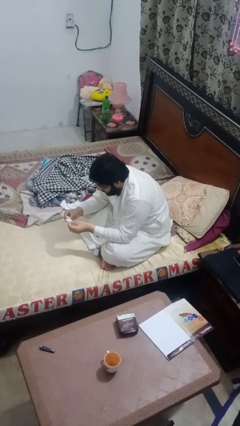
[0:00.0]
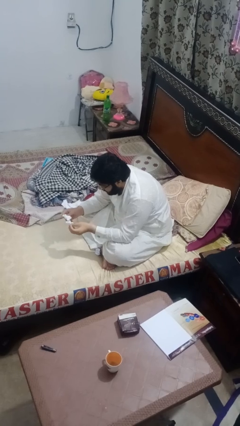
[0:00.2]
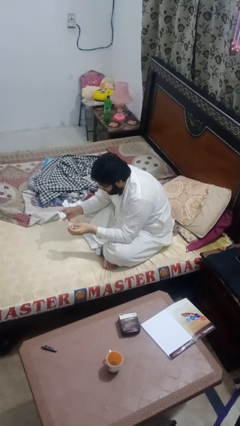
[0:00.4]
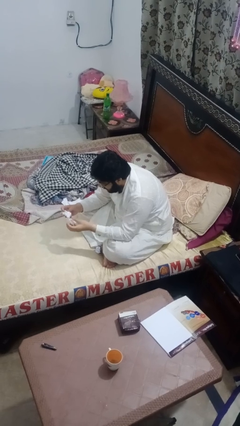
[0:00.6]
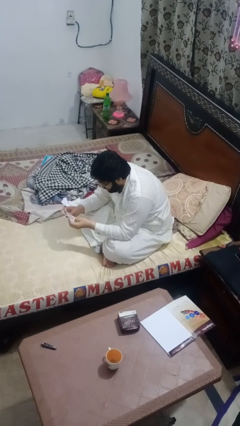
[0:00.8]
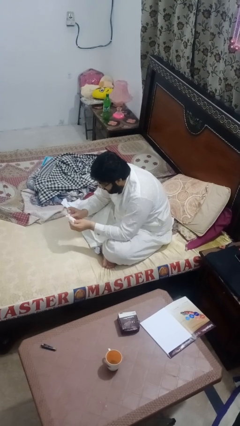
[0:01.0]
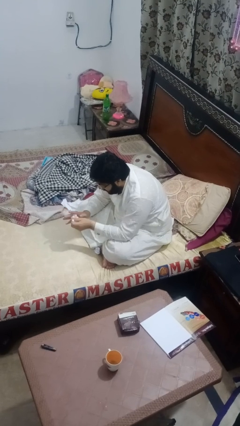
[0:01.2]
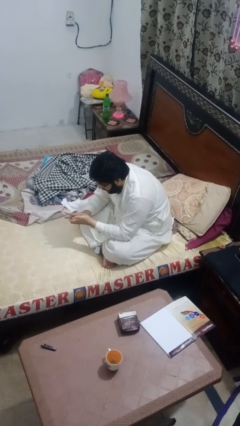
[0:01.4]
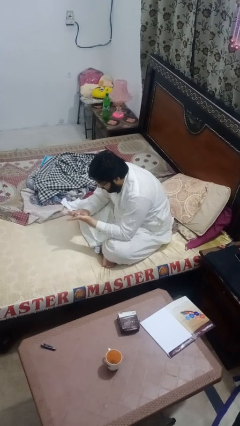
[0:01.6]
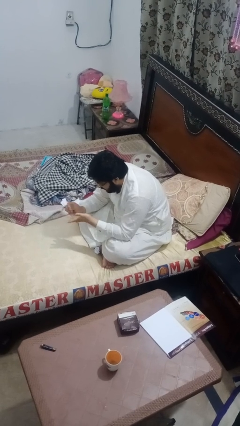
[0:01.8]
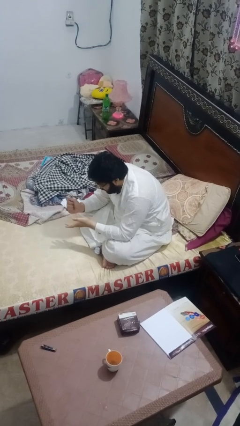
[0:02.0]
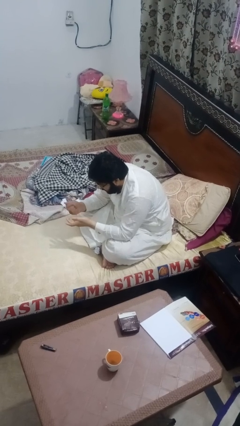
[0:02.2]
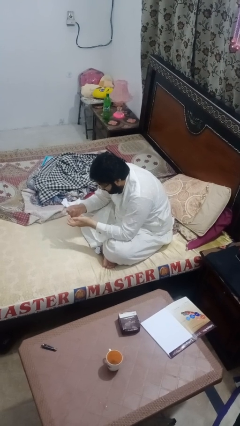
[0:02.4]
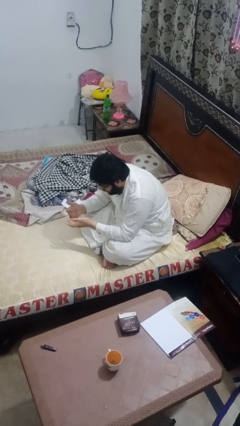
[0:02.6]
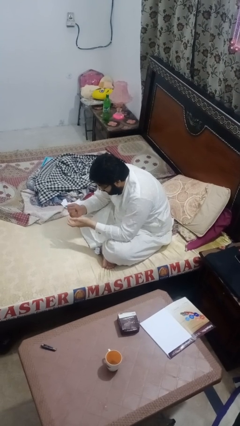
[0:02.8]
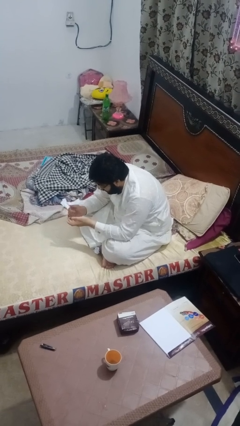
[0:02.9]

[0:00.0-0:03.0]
person crumples paper

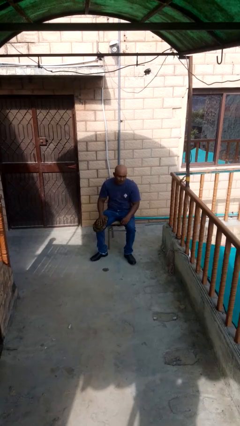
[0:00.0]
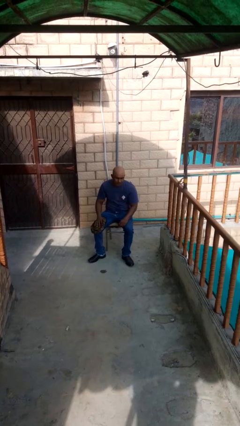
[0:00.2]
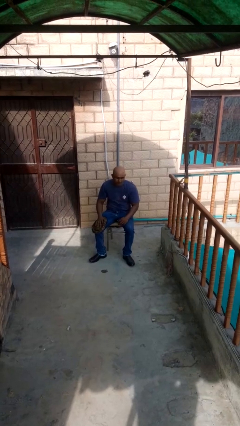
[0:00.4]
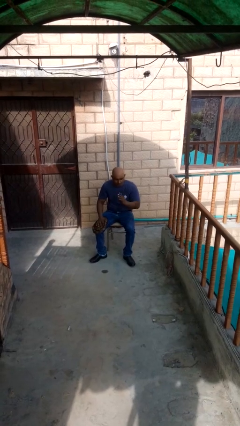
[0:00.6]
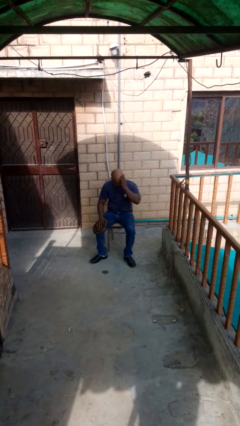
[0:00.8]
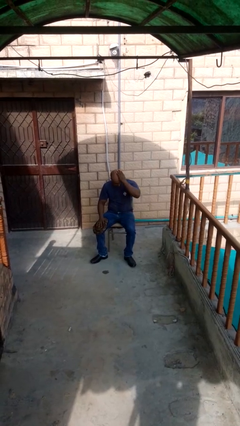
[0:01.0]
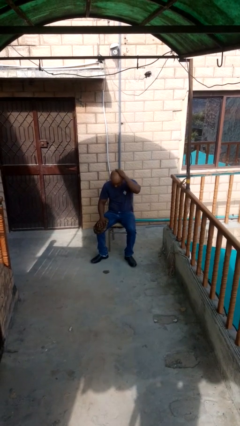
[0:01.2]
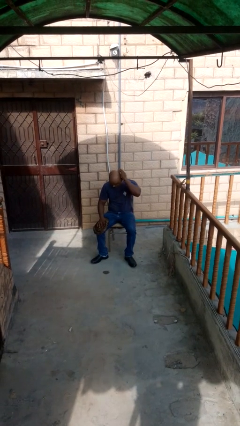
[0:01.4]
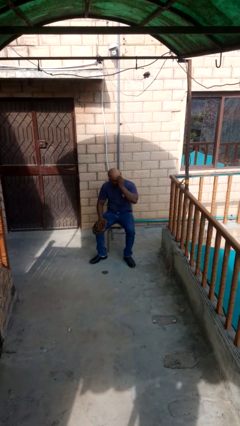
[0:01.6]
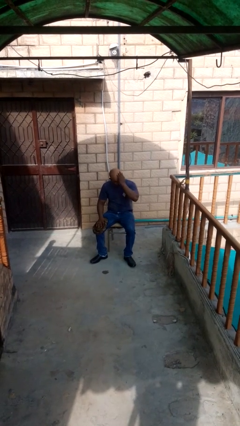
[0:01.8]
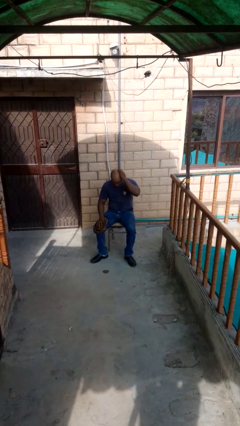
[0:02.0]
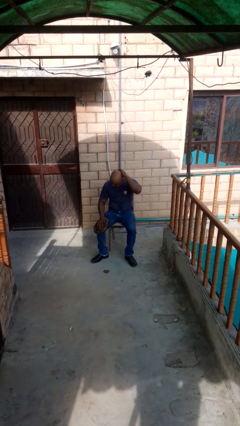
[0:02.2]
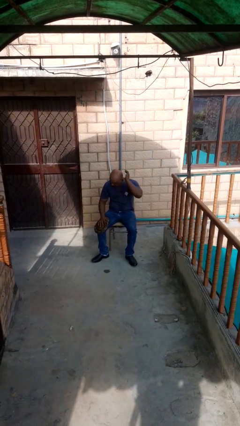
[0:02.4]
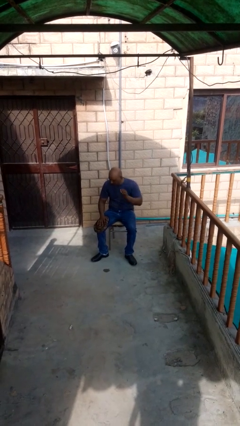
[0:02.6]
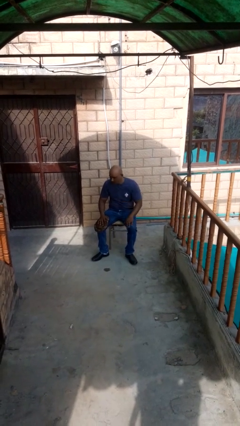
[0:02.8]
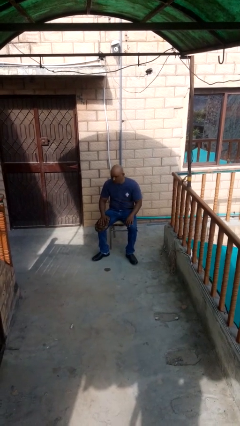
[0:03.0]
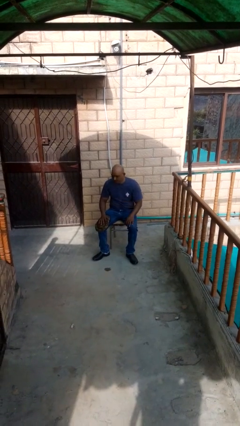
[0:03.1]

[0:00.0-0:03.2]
person strokes hair

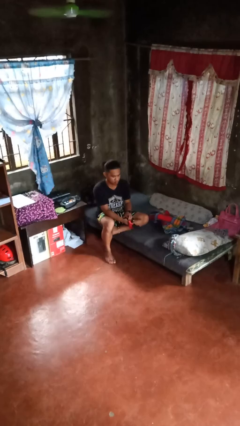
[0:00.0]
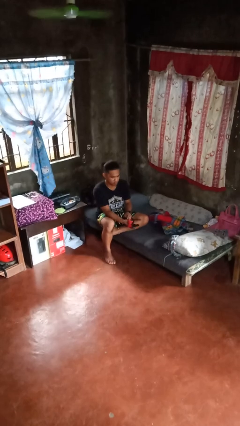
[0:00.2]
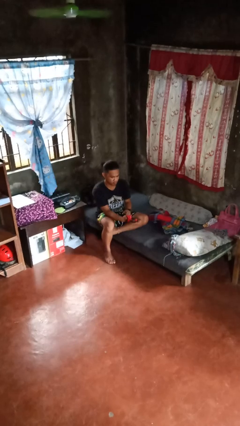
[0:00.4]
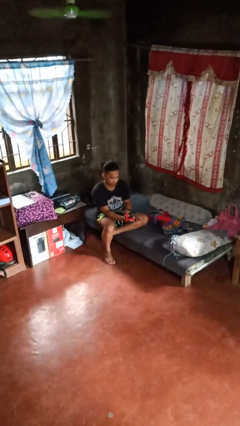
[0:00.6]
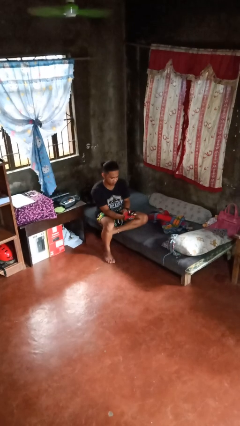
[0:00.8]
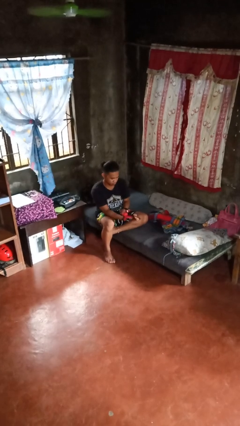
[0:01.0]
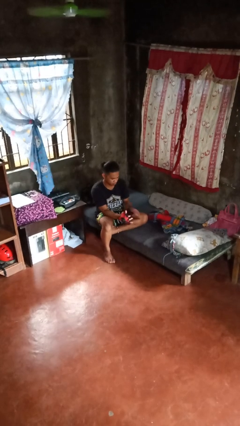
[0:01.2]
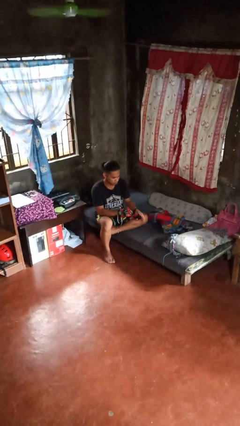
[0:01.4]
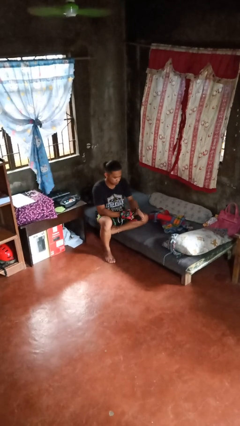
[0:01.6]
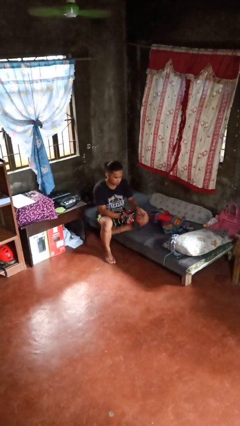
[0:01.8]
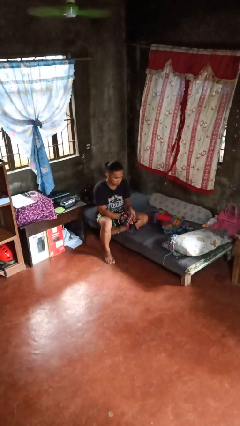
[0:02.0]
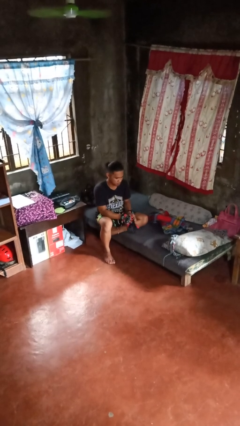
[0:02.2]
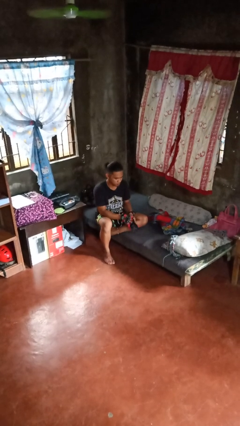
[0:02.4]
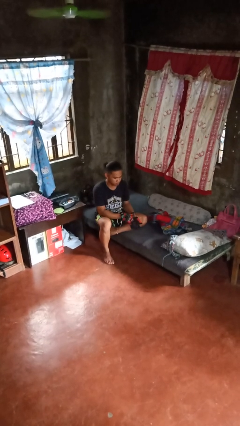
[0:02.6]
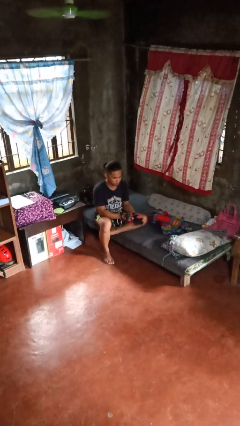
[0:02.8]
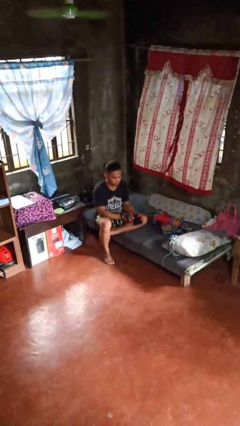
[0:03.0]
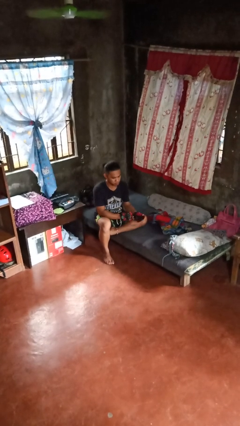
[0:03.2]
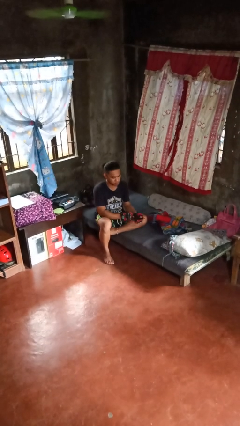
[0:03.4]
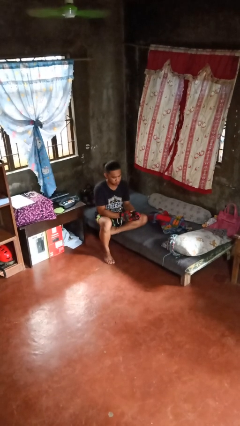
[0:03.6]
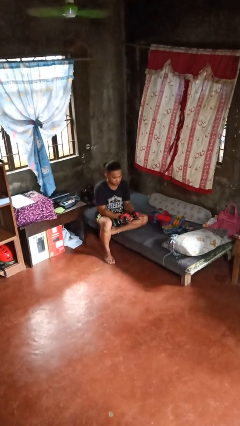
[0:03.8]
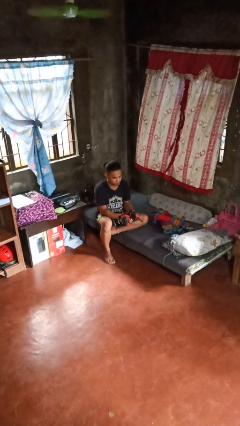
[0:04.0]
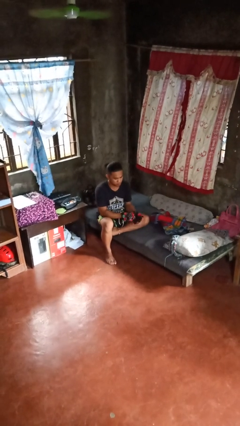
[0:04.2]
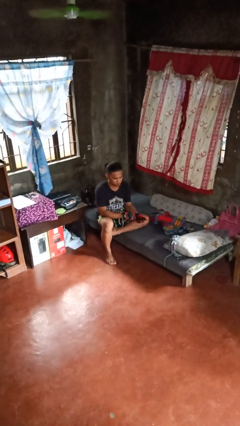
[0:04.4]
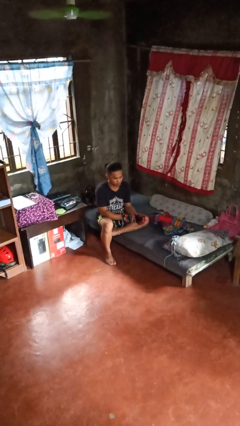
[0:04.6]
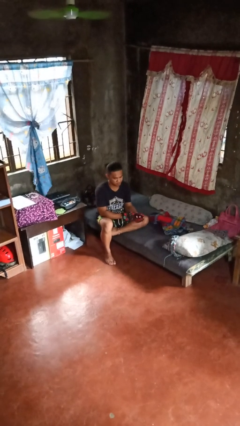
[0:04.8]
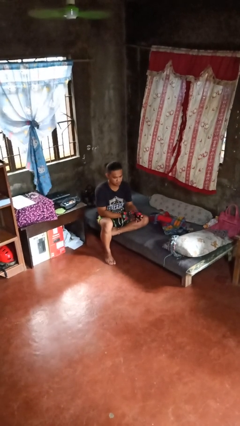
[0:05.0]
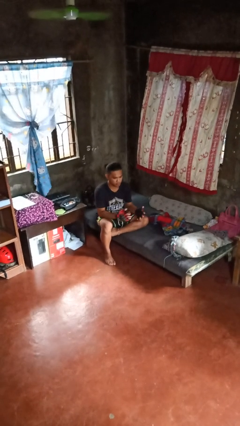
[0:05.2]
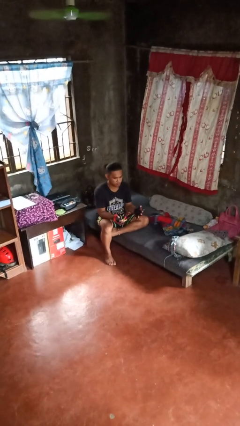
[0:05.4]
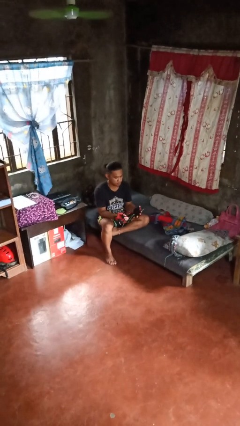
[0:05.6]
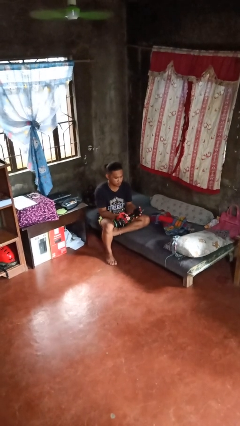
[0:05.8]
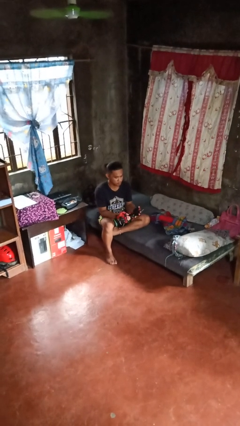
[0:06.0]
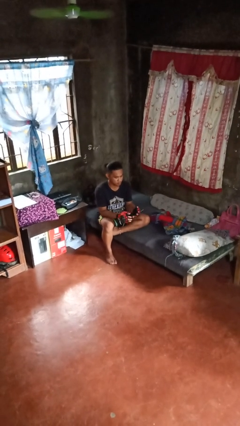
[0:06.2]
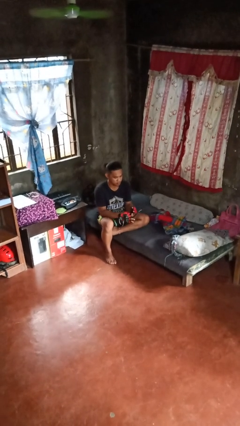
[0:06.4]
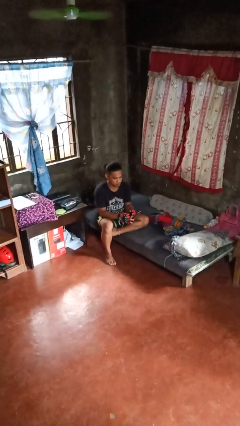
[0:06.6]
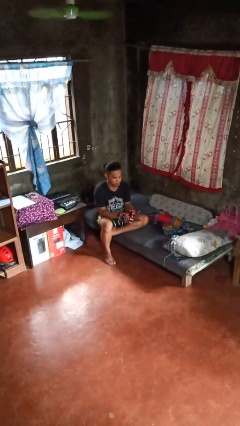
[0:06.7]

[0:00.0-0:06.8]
person puts on gloves

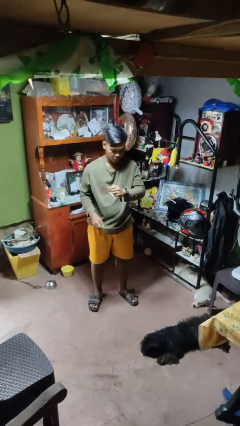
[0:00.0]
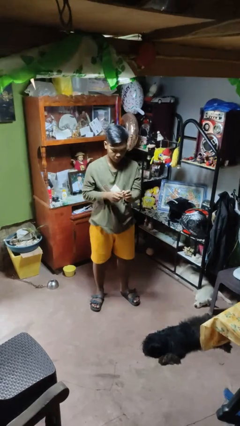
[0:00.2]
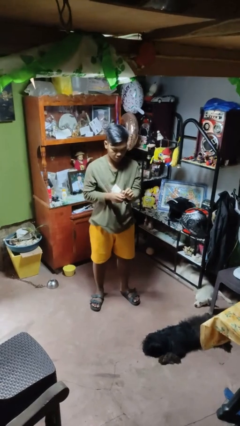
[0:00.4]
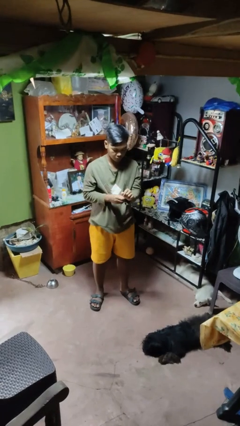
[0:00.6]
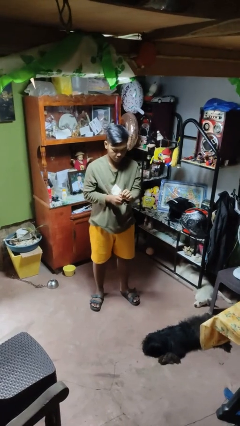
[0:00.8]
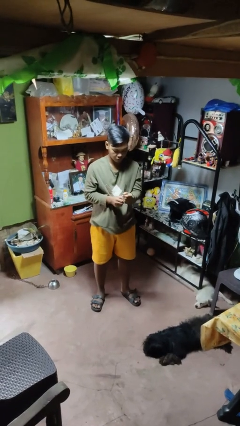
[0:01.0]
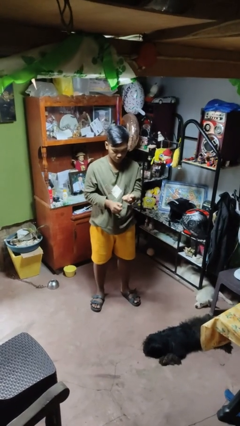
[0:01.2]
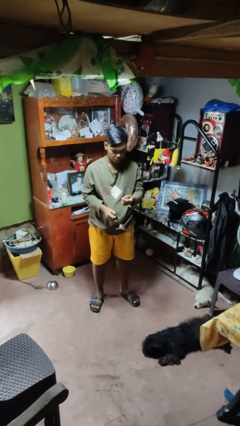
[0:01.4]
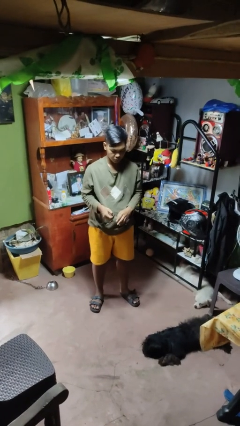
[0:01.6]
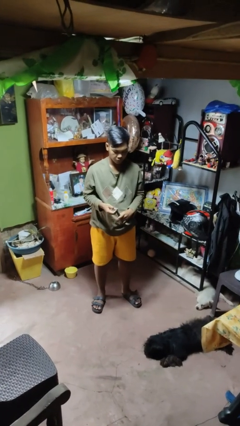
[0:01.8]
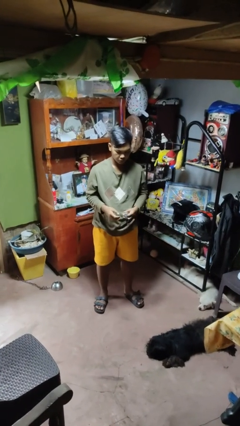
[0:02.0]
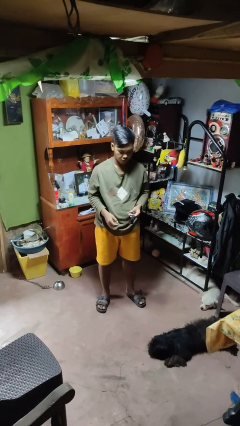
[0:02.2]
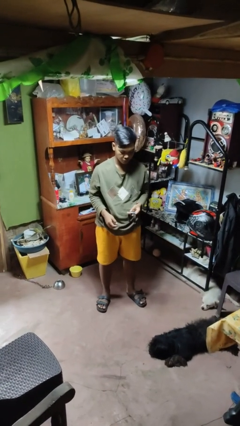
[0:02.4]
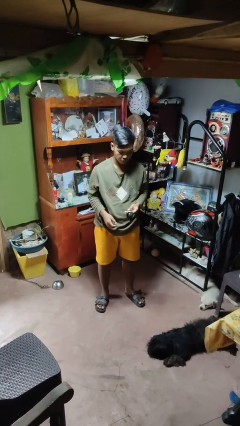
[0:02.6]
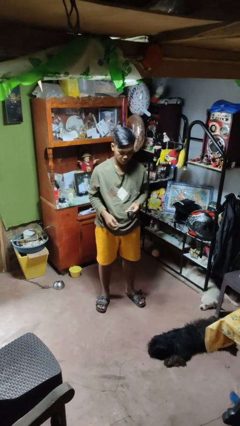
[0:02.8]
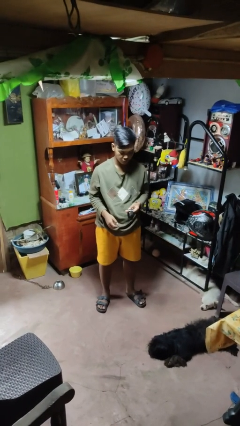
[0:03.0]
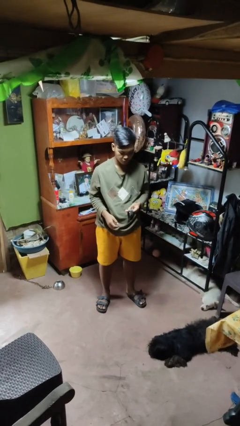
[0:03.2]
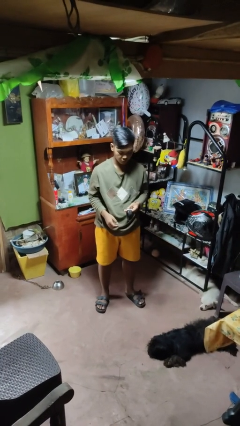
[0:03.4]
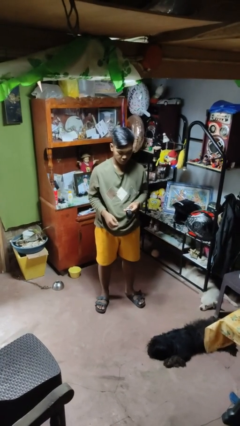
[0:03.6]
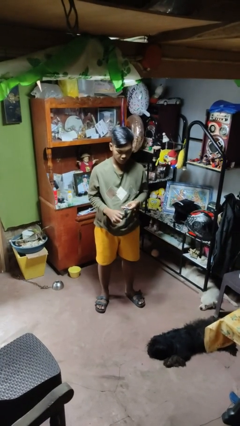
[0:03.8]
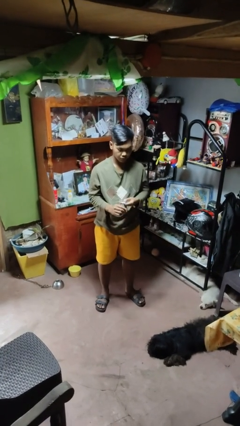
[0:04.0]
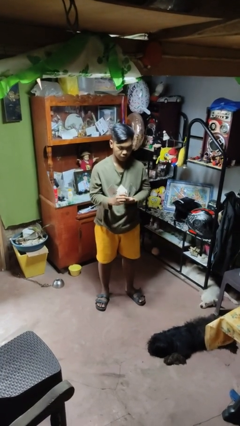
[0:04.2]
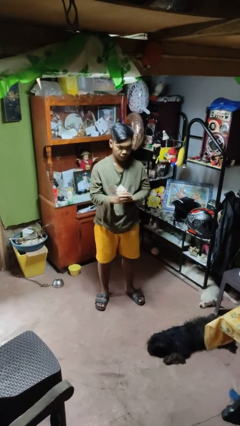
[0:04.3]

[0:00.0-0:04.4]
person takes off wristwatch

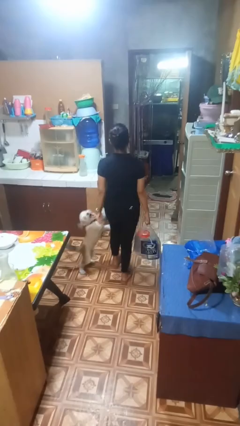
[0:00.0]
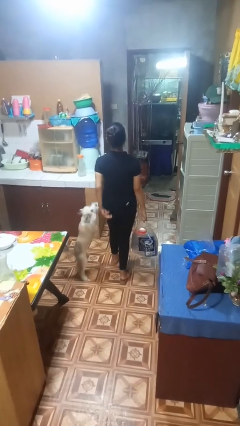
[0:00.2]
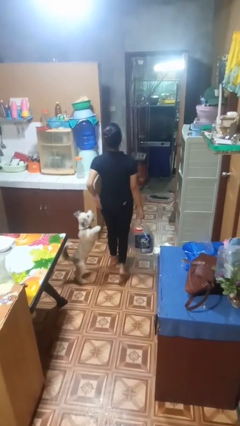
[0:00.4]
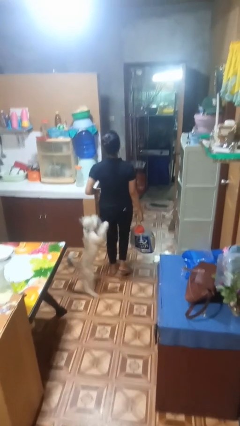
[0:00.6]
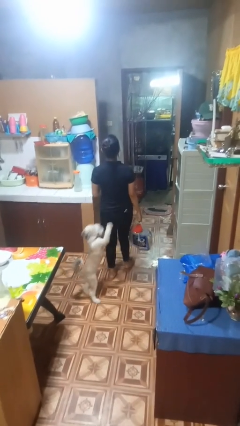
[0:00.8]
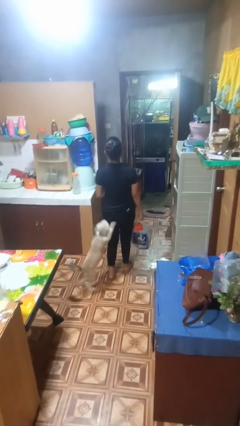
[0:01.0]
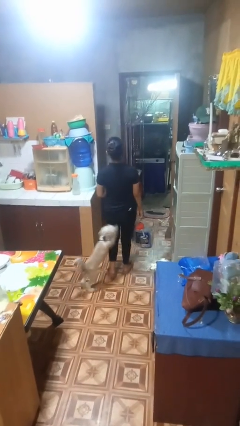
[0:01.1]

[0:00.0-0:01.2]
person carries groceries
